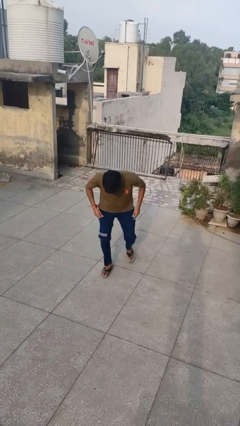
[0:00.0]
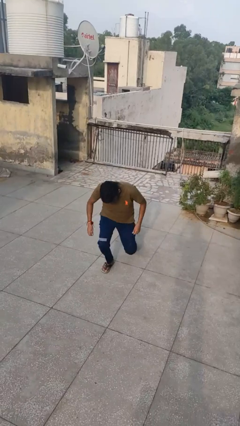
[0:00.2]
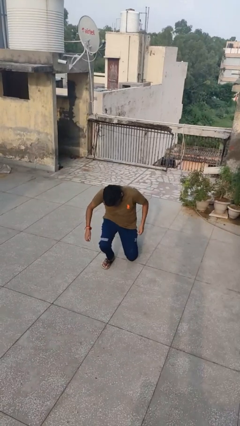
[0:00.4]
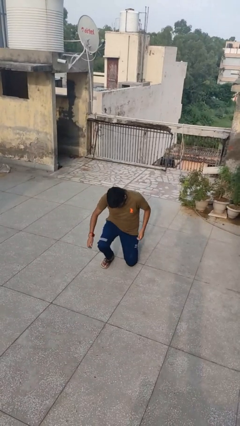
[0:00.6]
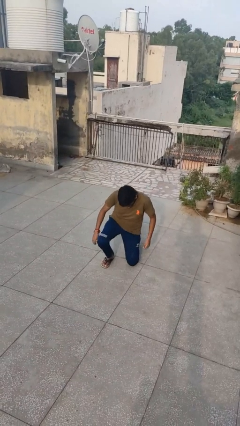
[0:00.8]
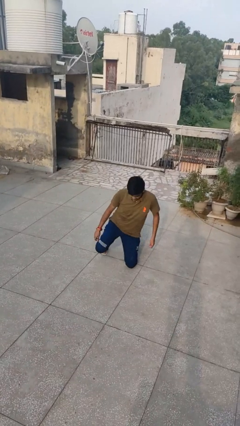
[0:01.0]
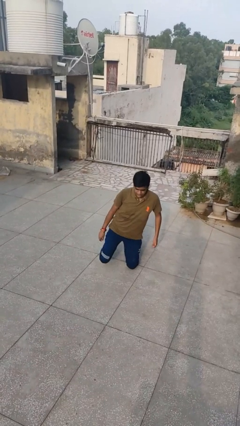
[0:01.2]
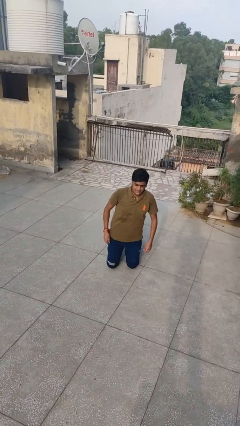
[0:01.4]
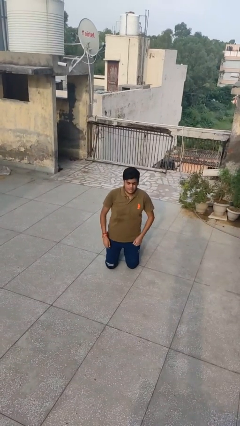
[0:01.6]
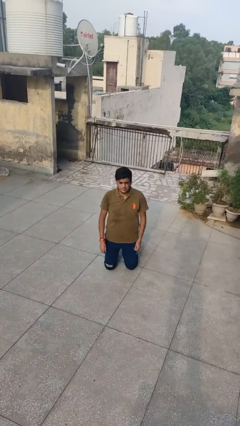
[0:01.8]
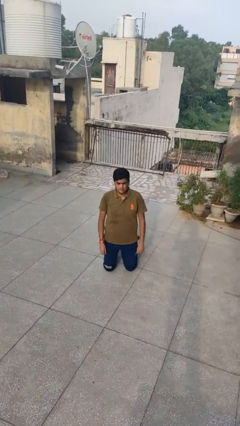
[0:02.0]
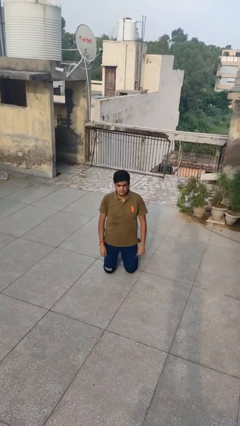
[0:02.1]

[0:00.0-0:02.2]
person kneels

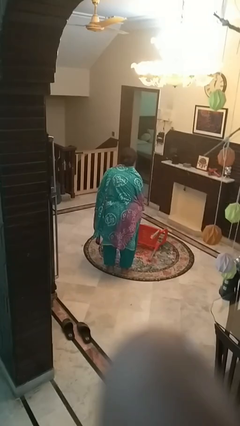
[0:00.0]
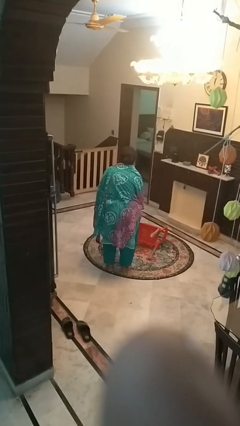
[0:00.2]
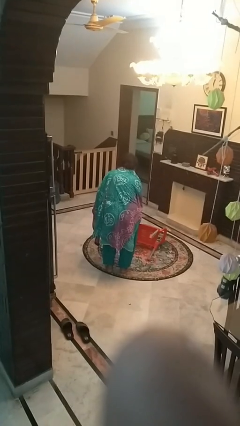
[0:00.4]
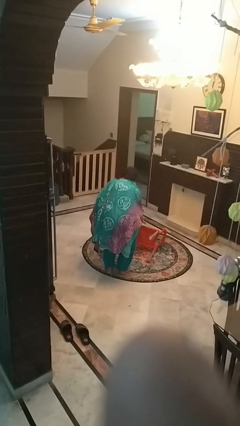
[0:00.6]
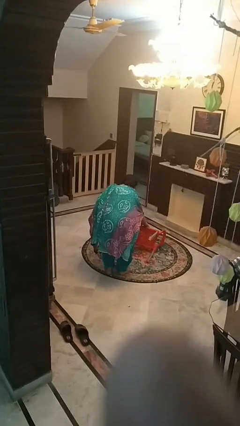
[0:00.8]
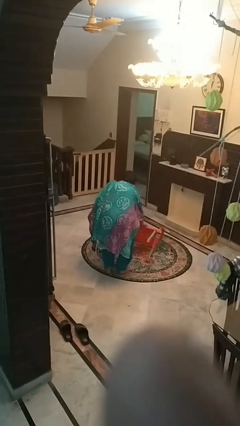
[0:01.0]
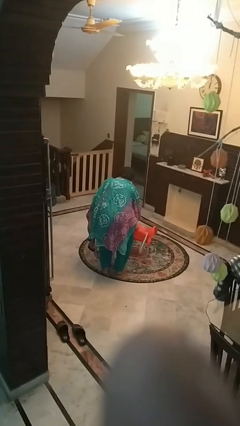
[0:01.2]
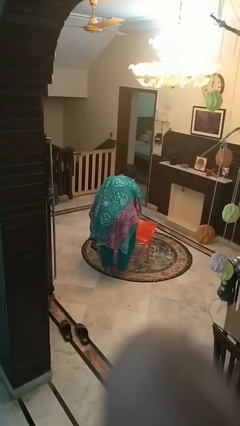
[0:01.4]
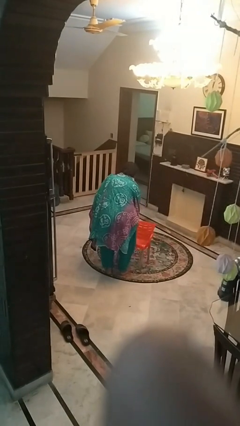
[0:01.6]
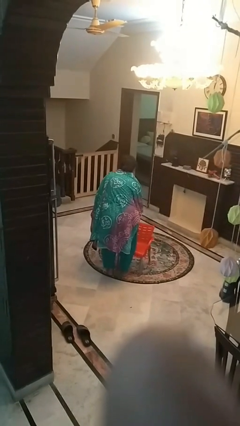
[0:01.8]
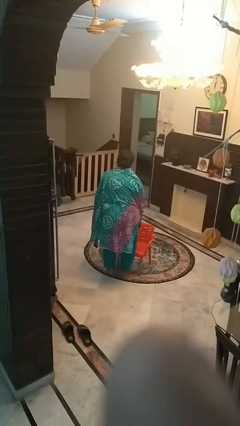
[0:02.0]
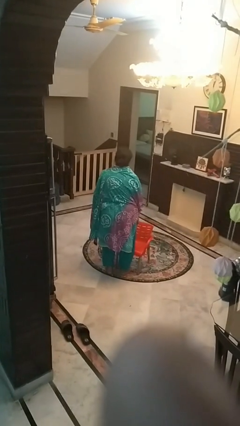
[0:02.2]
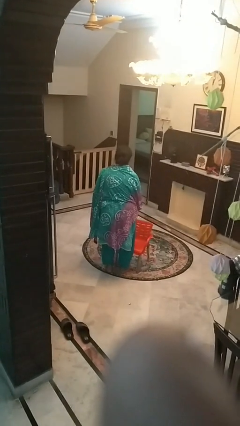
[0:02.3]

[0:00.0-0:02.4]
person sets upright furniture

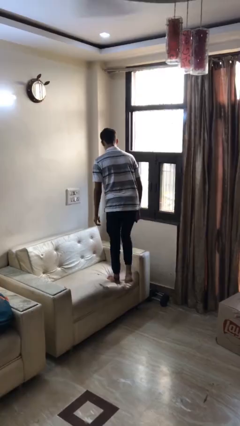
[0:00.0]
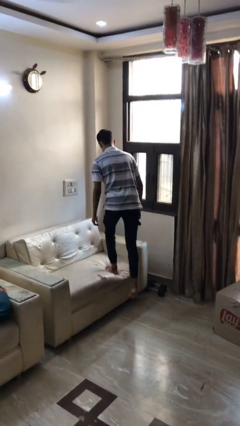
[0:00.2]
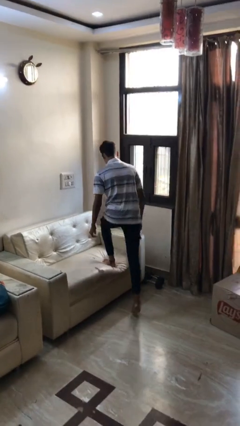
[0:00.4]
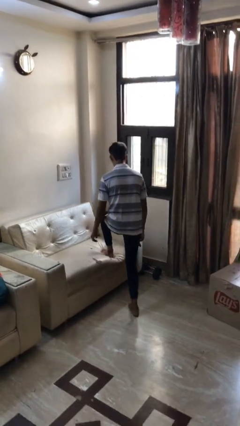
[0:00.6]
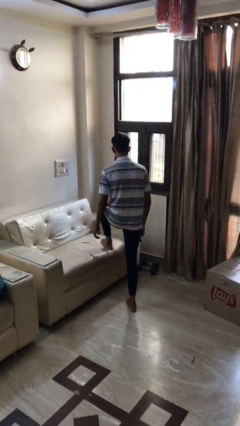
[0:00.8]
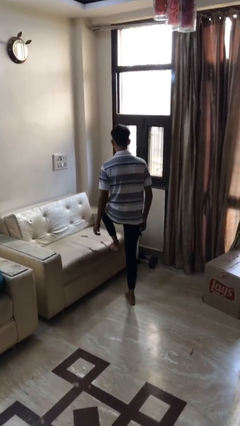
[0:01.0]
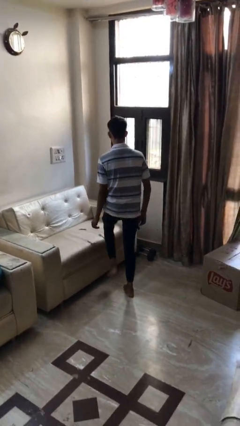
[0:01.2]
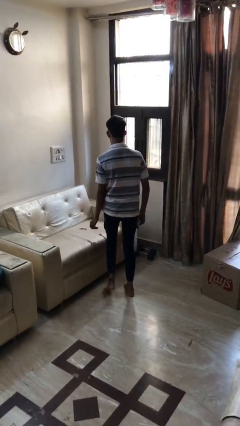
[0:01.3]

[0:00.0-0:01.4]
person climbs off couch

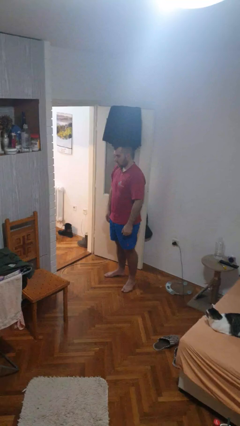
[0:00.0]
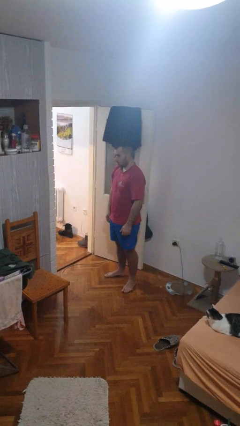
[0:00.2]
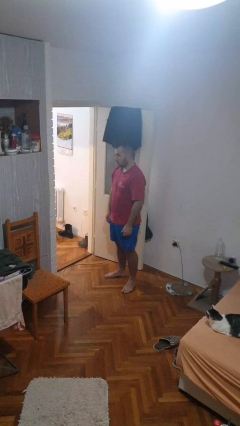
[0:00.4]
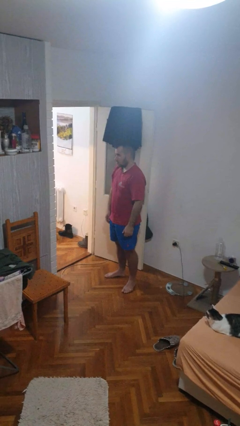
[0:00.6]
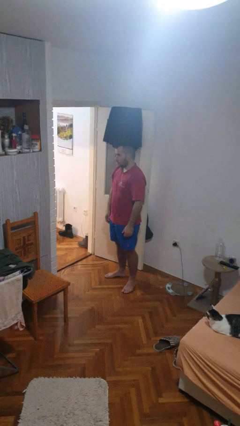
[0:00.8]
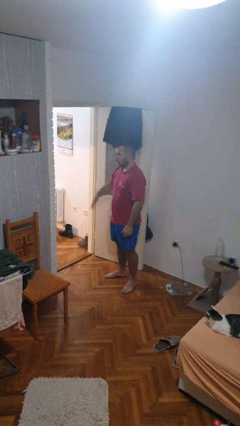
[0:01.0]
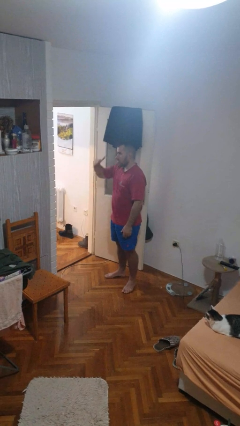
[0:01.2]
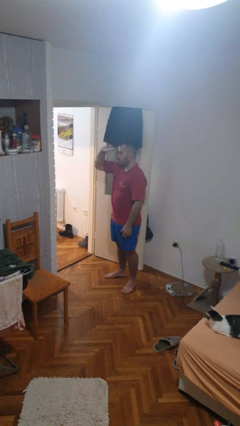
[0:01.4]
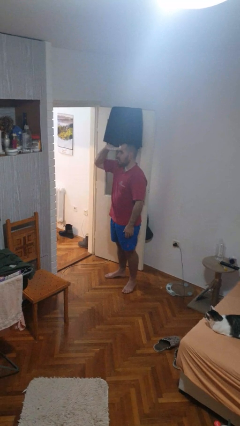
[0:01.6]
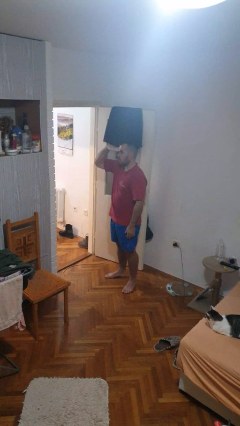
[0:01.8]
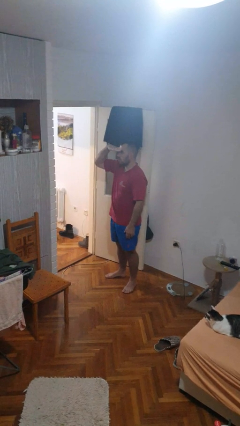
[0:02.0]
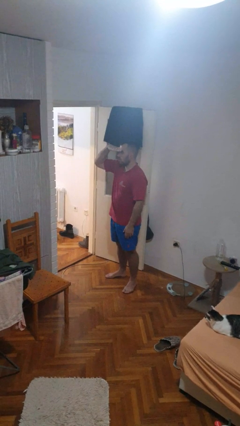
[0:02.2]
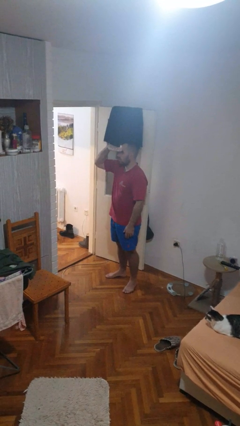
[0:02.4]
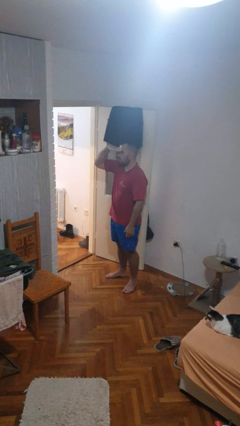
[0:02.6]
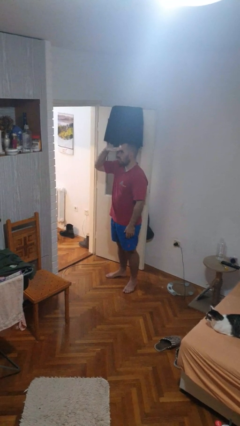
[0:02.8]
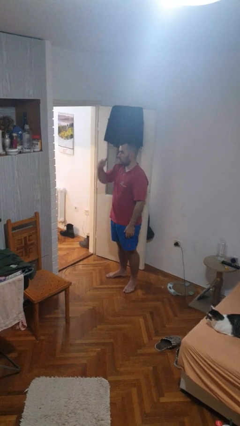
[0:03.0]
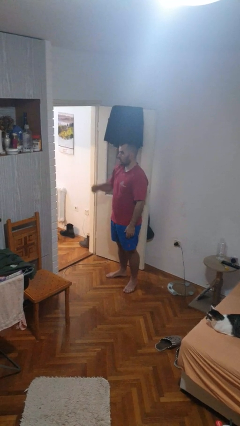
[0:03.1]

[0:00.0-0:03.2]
person shades eyes

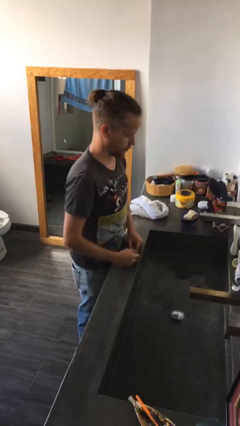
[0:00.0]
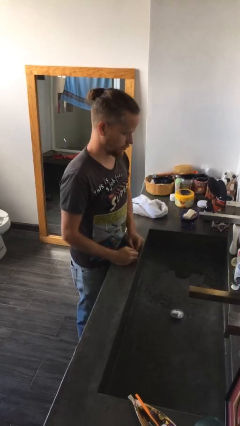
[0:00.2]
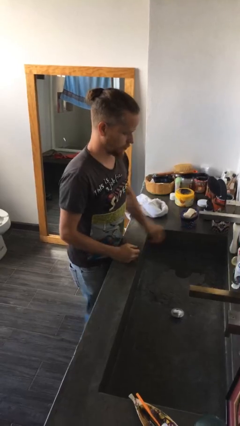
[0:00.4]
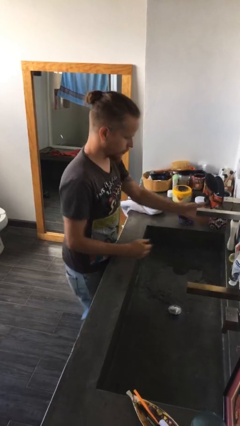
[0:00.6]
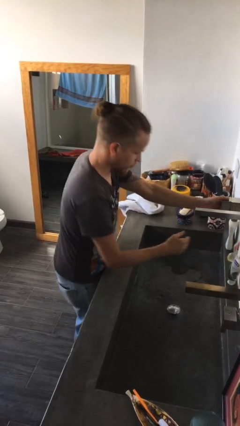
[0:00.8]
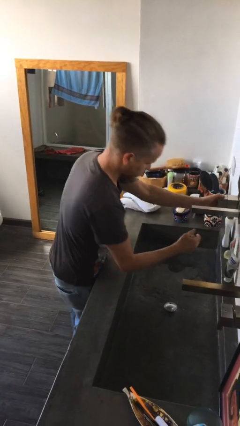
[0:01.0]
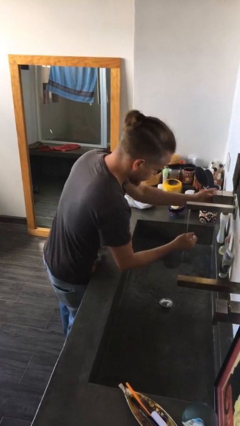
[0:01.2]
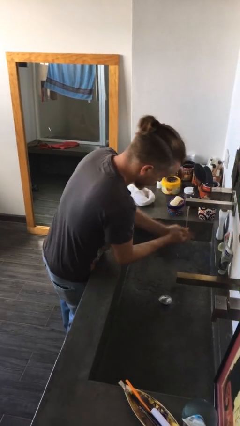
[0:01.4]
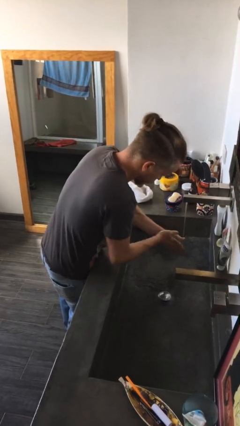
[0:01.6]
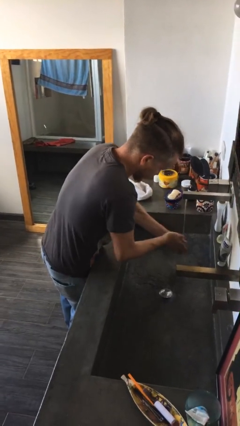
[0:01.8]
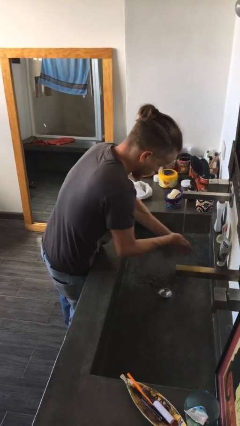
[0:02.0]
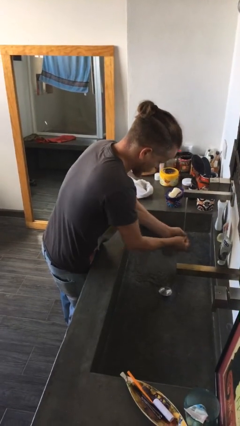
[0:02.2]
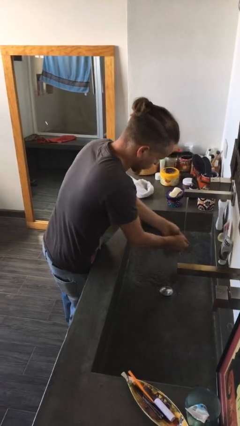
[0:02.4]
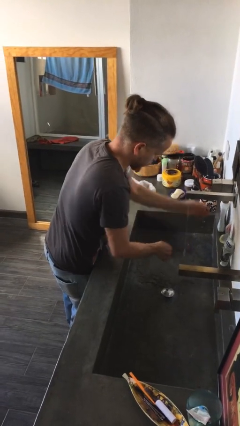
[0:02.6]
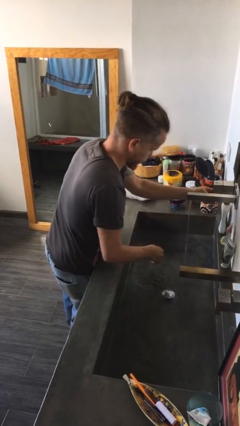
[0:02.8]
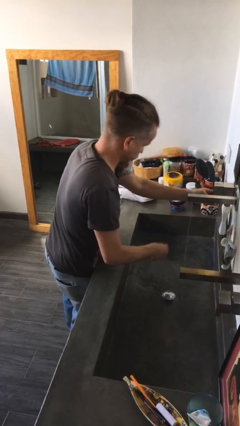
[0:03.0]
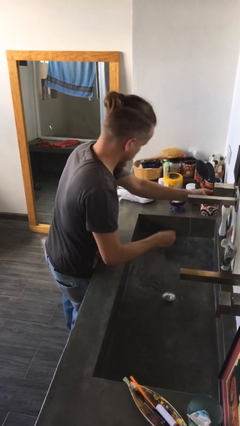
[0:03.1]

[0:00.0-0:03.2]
person washes hands

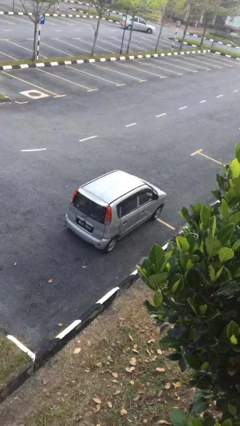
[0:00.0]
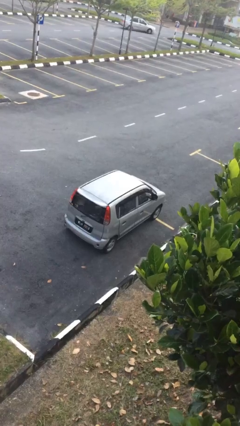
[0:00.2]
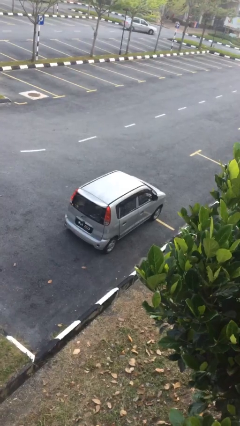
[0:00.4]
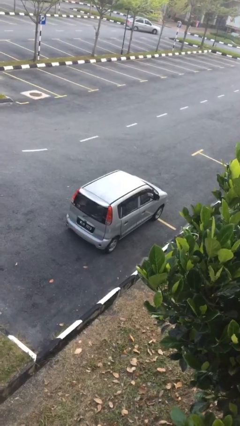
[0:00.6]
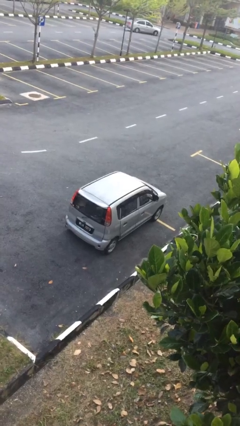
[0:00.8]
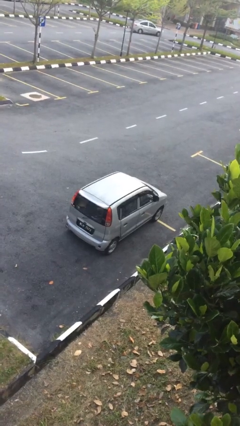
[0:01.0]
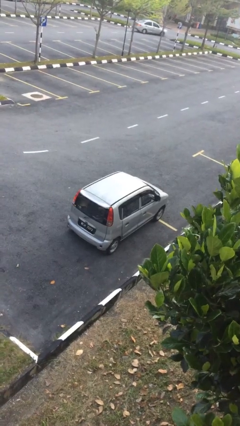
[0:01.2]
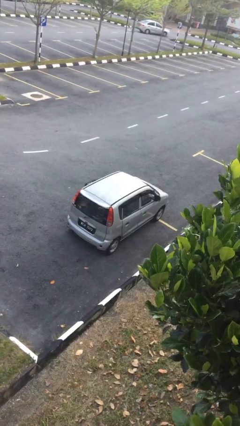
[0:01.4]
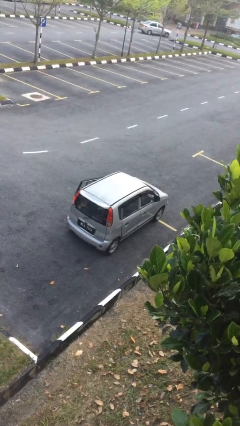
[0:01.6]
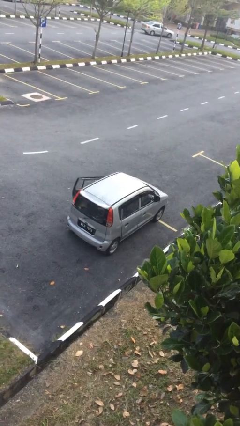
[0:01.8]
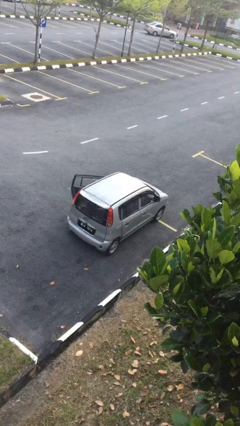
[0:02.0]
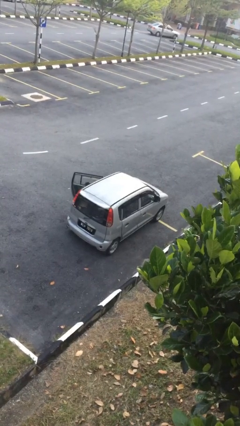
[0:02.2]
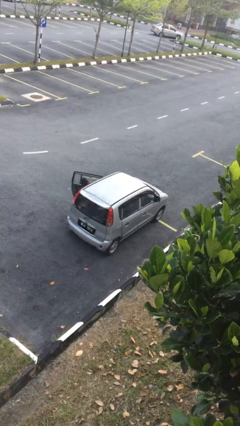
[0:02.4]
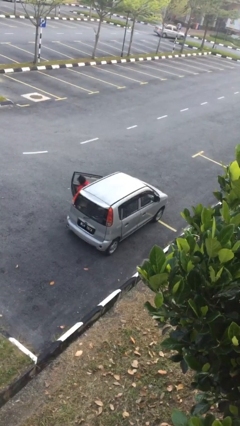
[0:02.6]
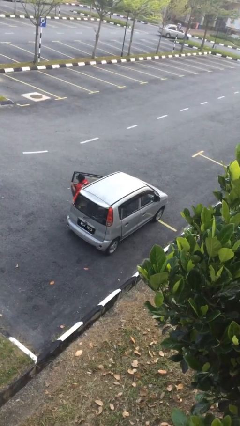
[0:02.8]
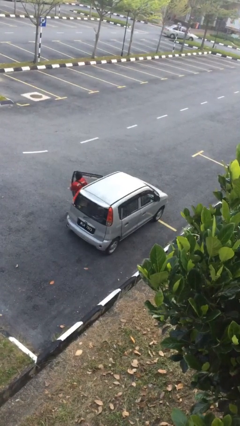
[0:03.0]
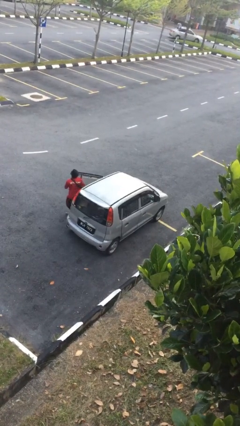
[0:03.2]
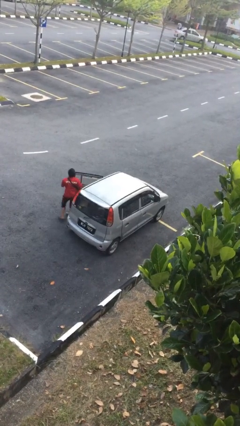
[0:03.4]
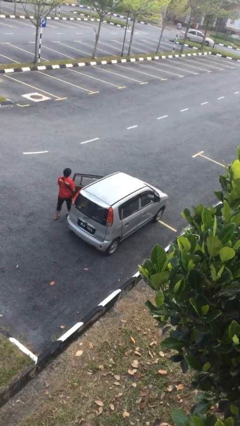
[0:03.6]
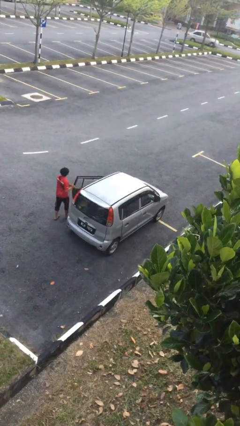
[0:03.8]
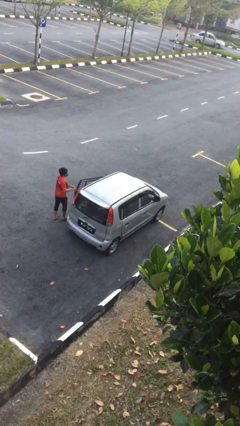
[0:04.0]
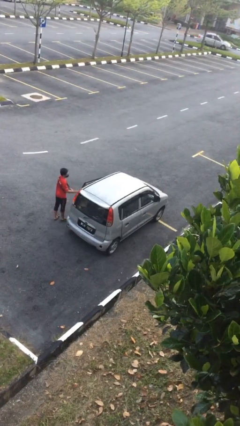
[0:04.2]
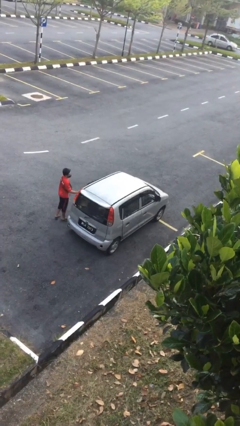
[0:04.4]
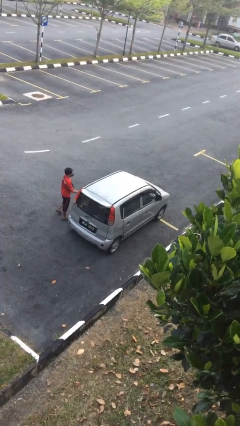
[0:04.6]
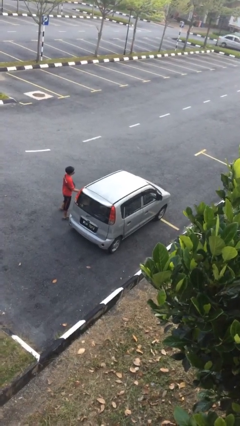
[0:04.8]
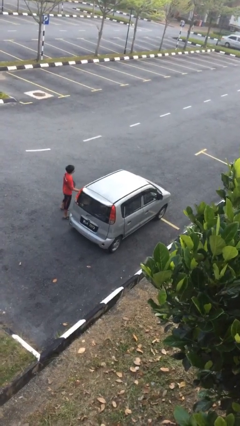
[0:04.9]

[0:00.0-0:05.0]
car drops off person
